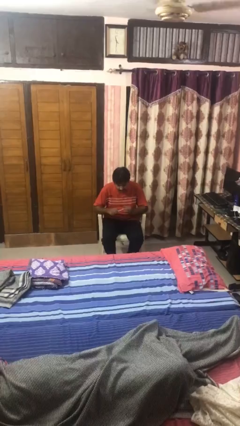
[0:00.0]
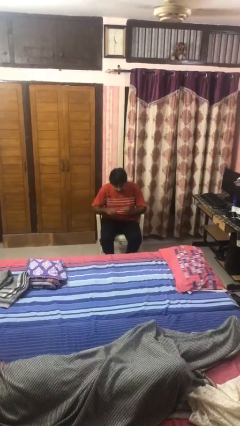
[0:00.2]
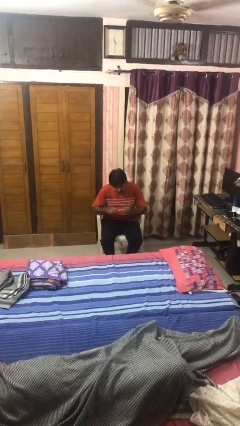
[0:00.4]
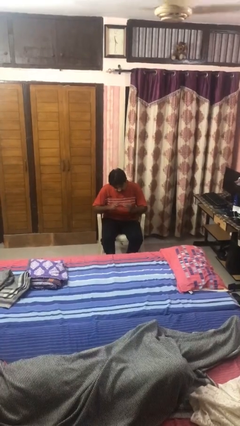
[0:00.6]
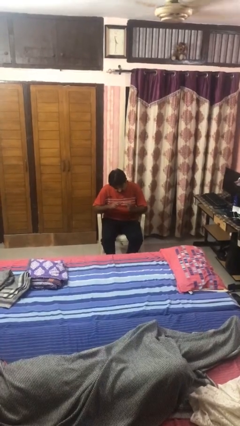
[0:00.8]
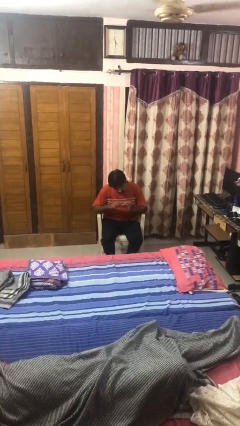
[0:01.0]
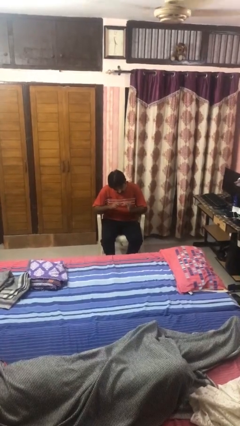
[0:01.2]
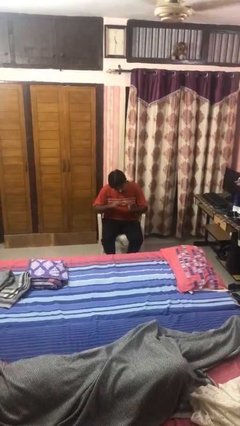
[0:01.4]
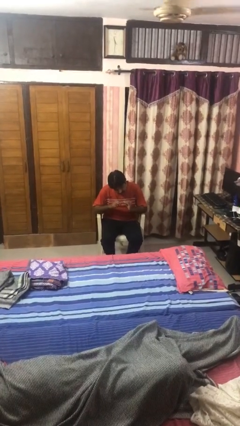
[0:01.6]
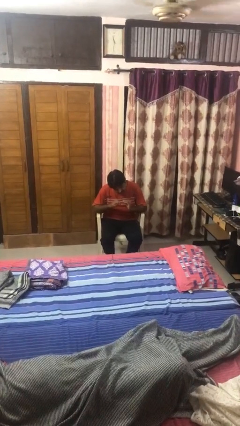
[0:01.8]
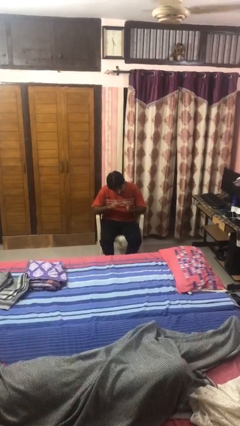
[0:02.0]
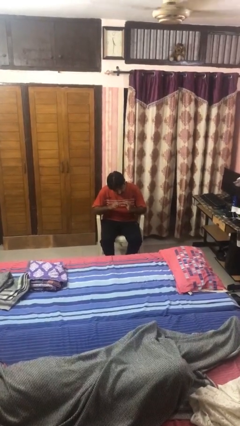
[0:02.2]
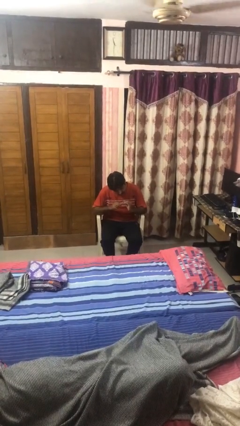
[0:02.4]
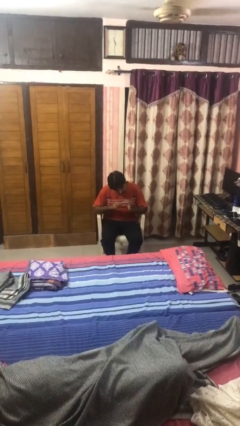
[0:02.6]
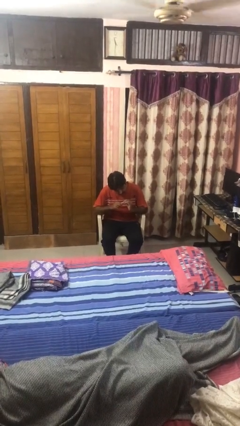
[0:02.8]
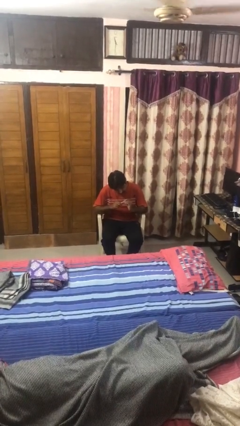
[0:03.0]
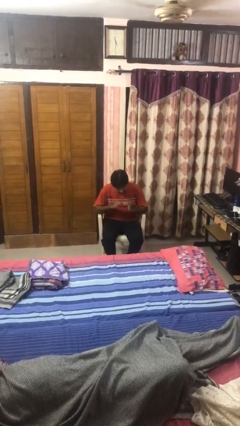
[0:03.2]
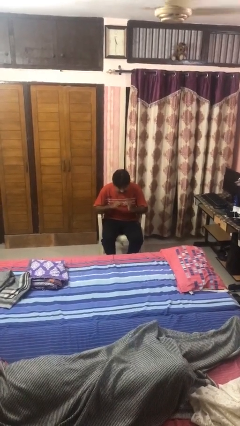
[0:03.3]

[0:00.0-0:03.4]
person files fingernails

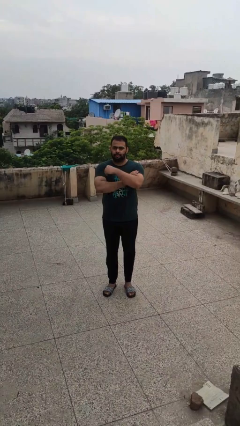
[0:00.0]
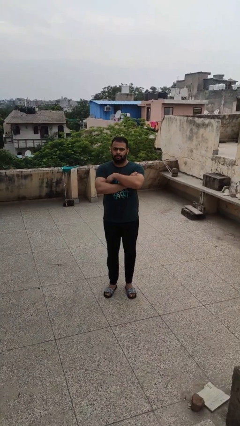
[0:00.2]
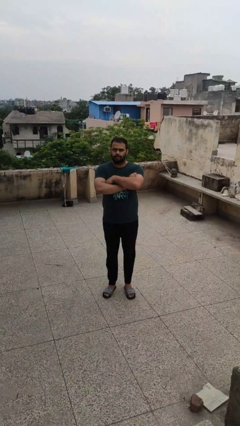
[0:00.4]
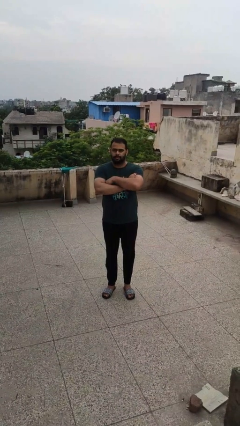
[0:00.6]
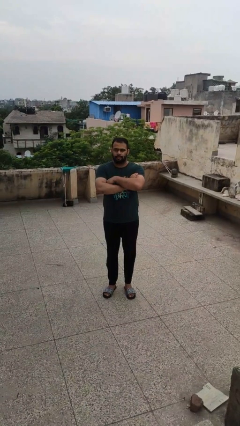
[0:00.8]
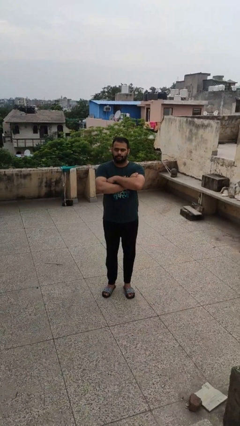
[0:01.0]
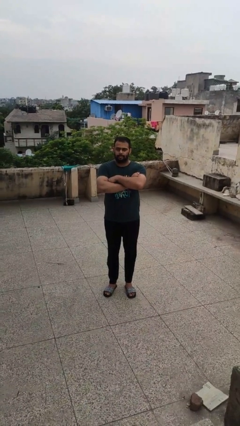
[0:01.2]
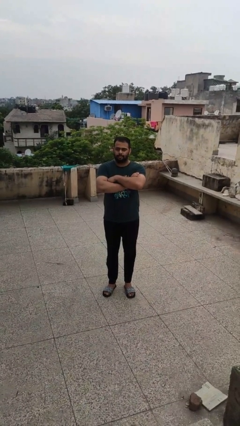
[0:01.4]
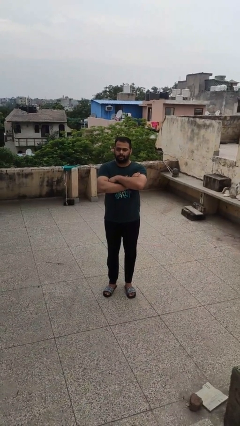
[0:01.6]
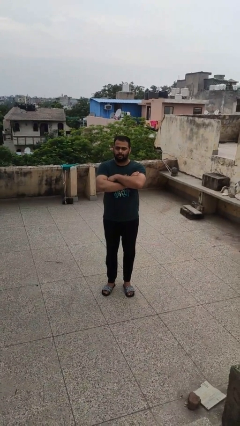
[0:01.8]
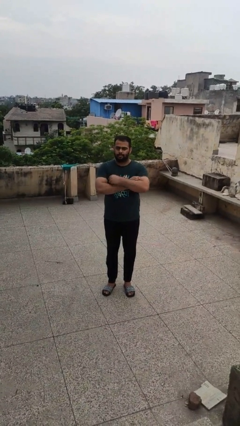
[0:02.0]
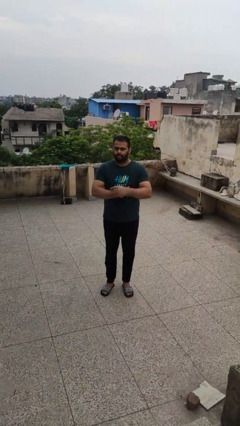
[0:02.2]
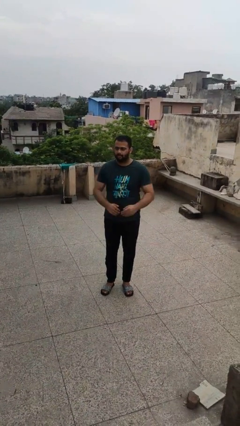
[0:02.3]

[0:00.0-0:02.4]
person crosses arms

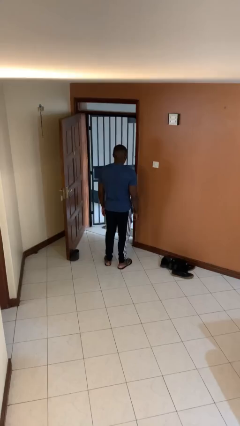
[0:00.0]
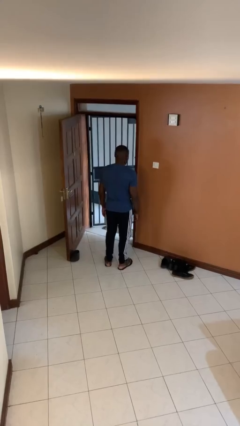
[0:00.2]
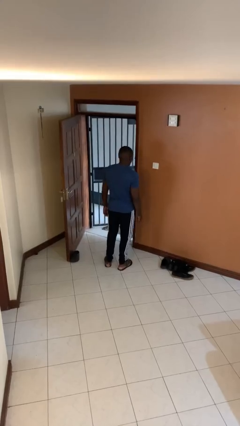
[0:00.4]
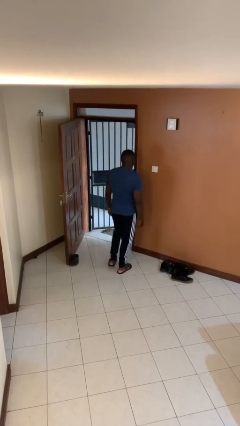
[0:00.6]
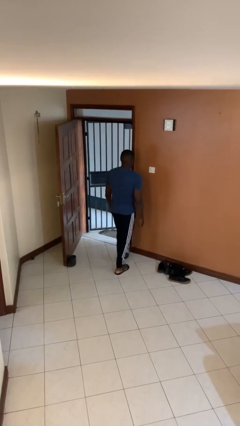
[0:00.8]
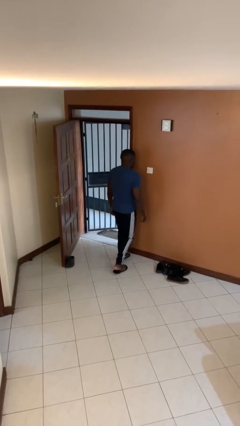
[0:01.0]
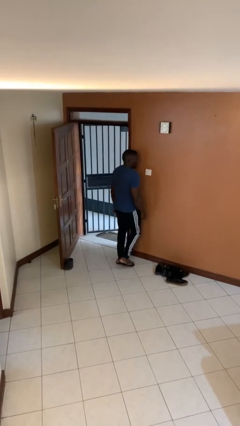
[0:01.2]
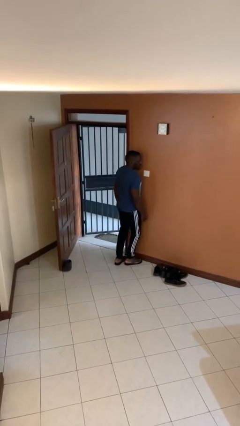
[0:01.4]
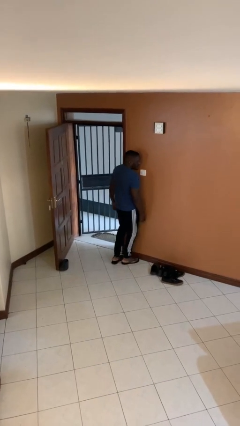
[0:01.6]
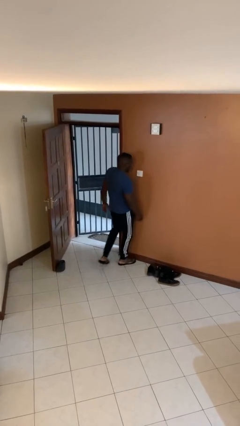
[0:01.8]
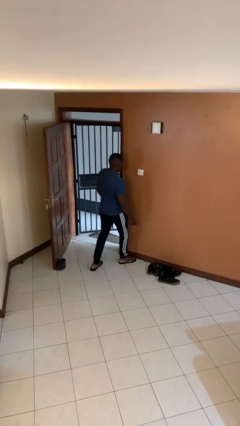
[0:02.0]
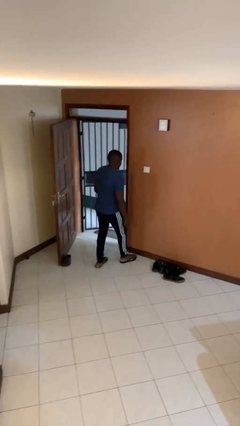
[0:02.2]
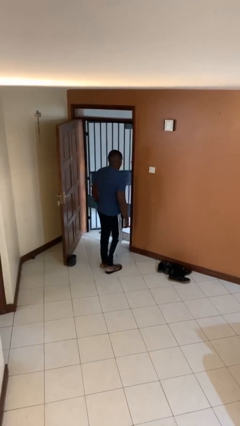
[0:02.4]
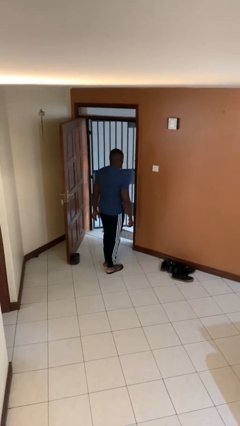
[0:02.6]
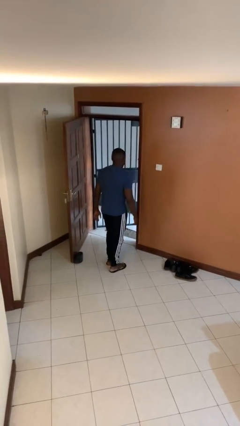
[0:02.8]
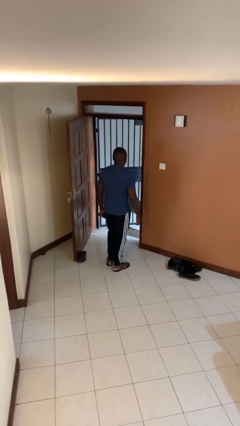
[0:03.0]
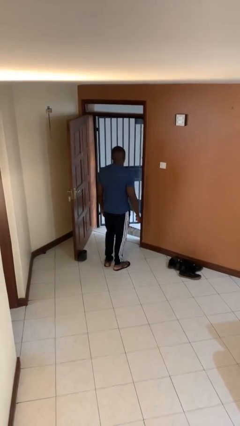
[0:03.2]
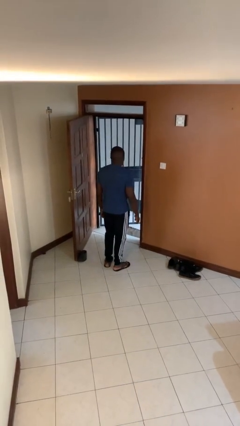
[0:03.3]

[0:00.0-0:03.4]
person bumps into wall

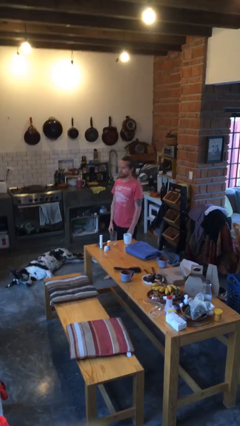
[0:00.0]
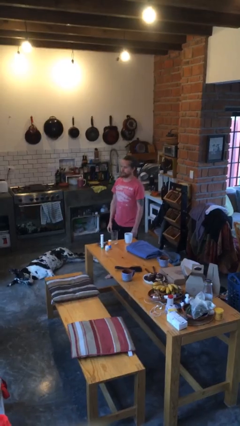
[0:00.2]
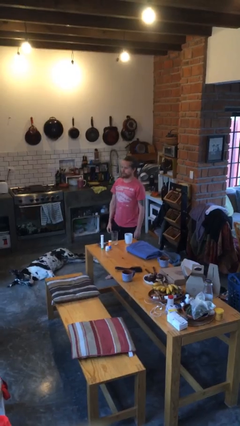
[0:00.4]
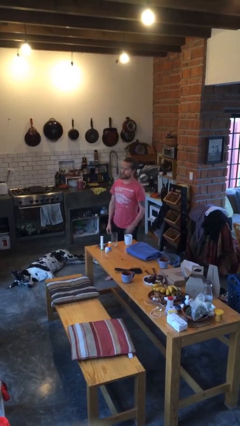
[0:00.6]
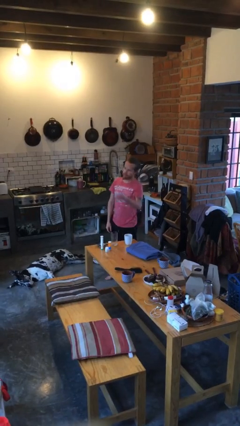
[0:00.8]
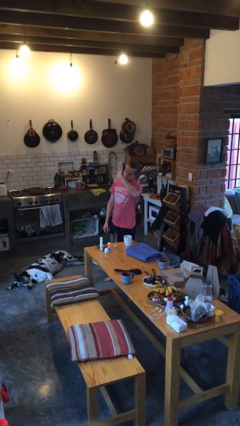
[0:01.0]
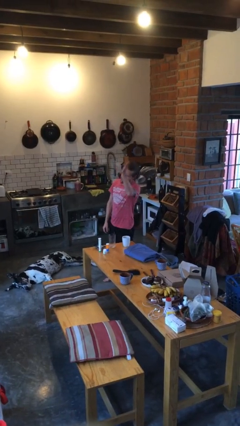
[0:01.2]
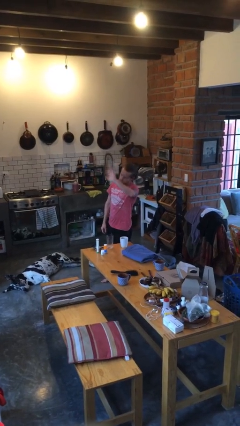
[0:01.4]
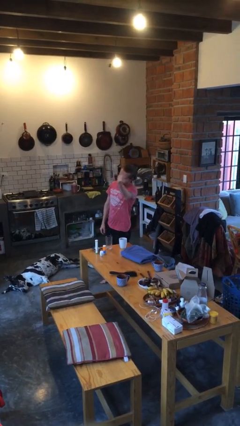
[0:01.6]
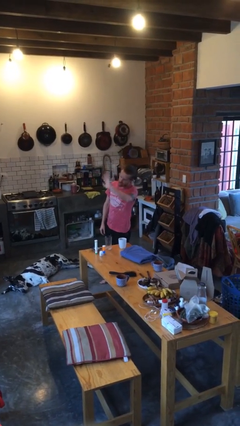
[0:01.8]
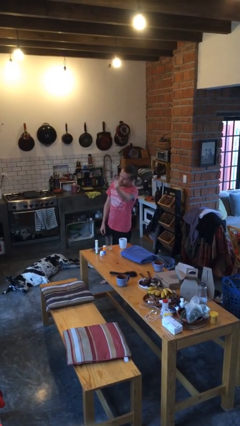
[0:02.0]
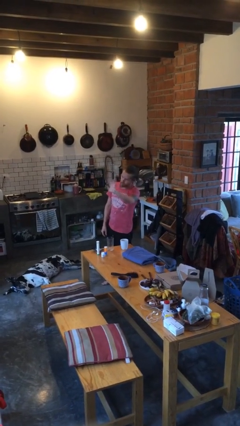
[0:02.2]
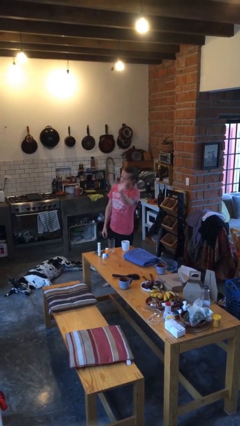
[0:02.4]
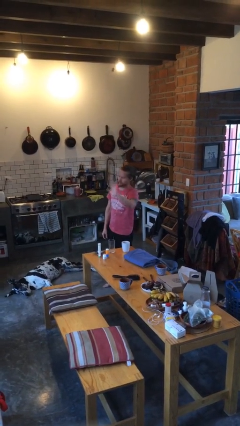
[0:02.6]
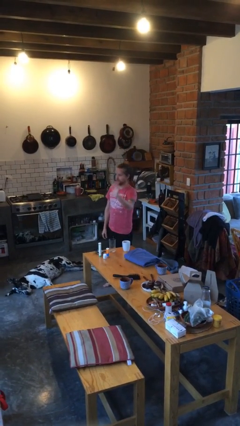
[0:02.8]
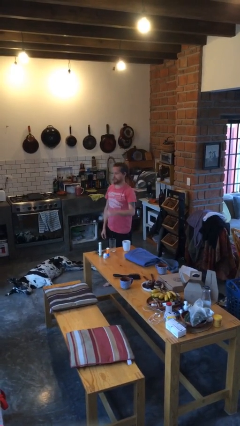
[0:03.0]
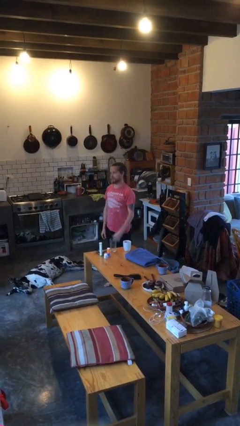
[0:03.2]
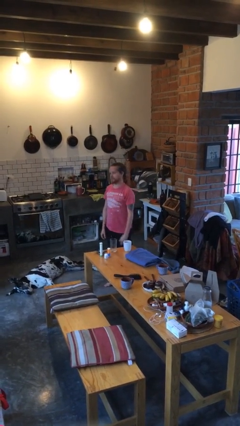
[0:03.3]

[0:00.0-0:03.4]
person waves at person

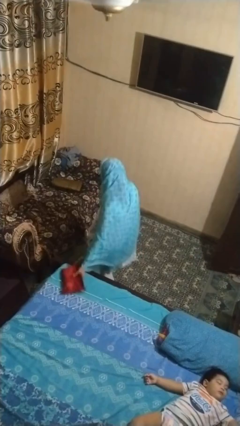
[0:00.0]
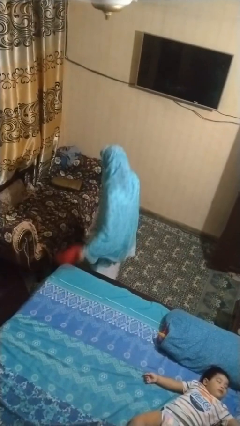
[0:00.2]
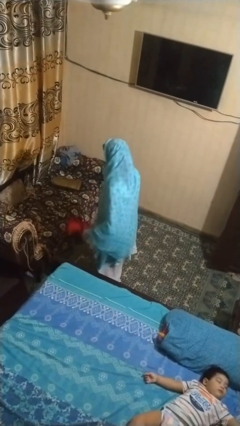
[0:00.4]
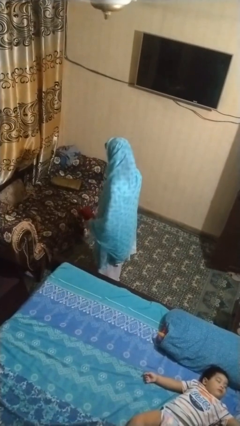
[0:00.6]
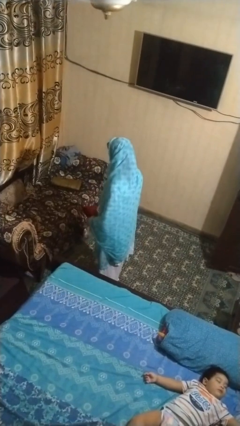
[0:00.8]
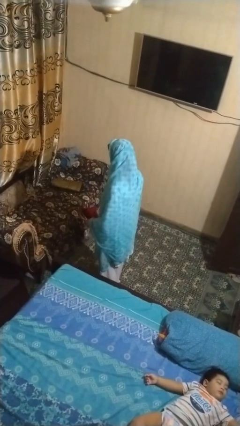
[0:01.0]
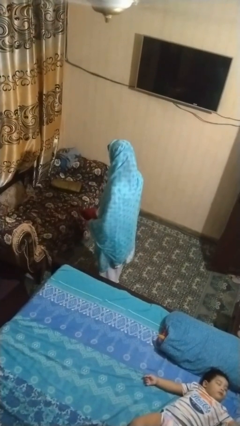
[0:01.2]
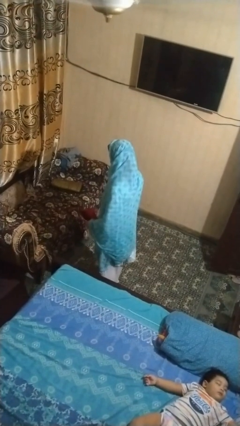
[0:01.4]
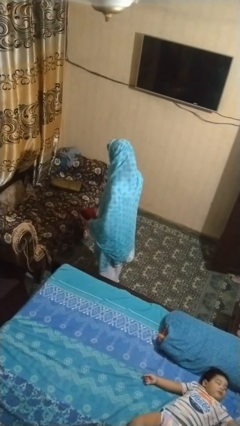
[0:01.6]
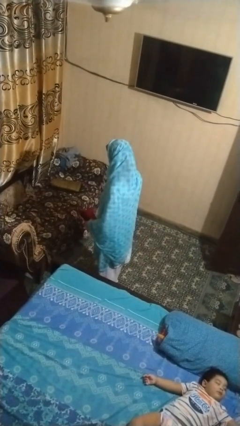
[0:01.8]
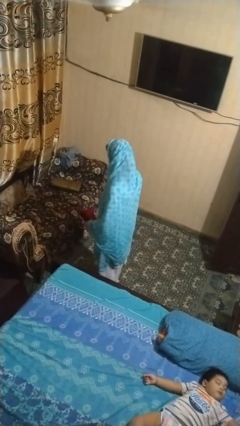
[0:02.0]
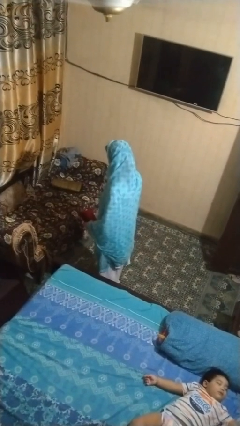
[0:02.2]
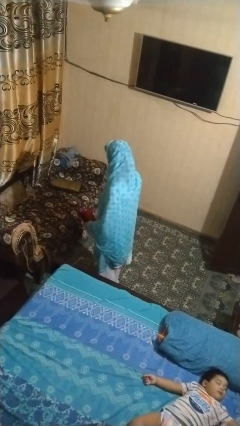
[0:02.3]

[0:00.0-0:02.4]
person picks up object from bed

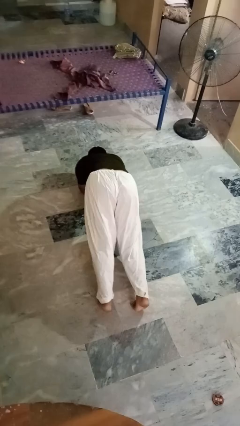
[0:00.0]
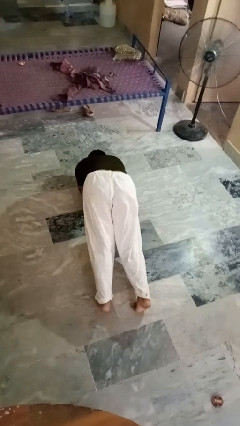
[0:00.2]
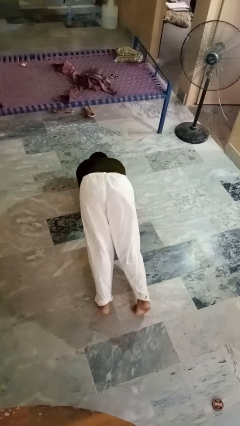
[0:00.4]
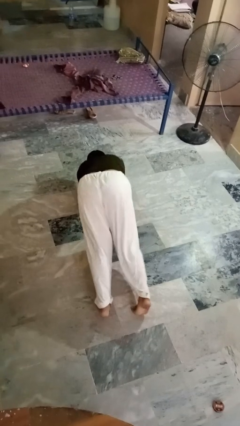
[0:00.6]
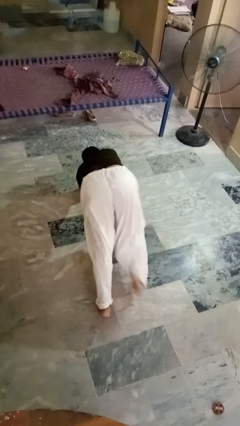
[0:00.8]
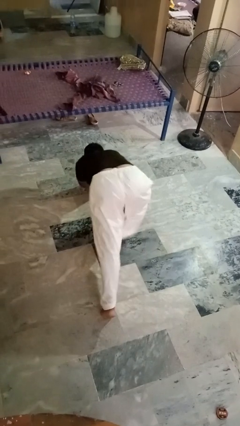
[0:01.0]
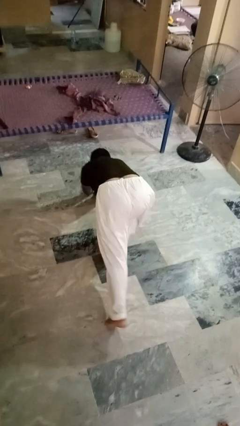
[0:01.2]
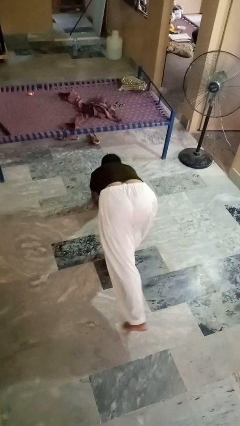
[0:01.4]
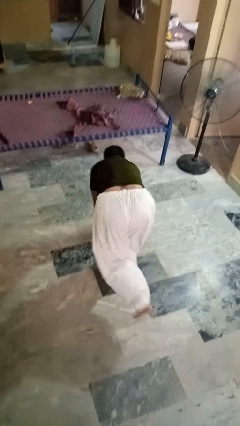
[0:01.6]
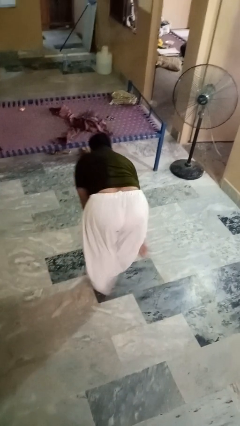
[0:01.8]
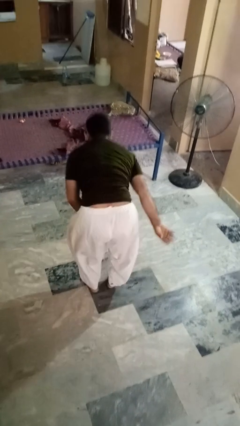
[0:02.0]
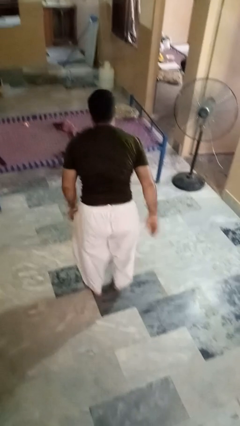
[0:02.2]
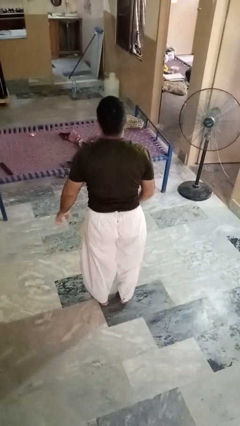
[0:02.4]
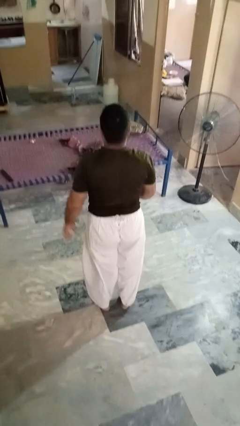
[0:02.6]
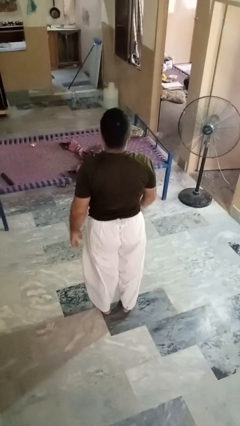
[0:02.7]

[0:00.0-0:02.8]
person stands up from floor
